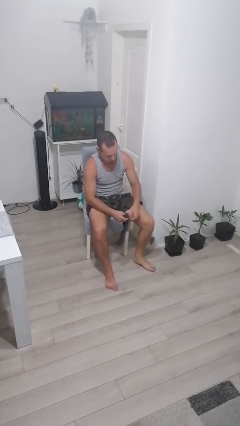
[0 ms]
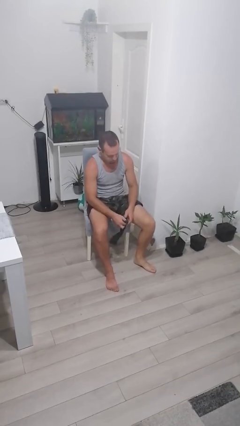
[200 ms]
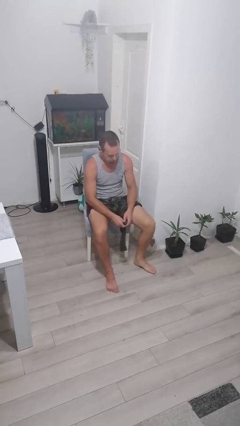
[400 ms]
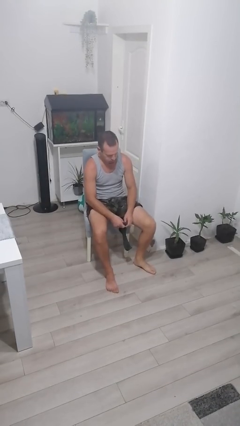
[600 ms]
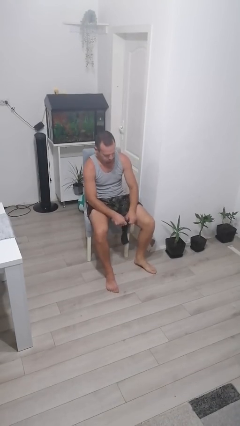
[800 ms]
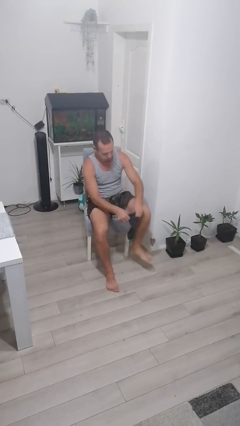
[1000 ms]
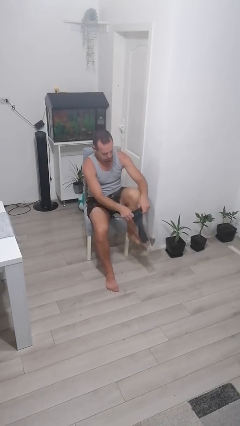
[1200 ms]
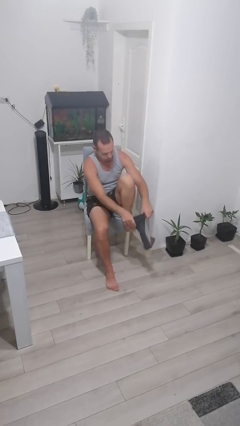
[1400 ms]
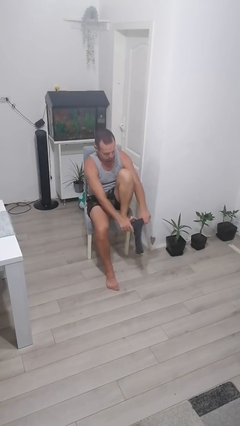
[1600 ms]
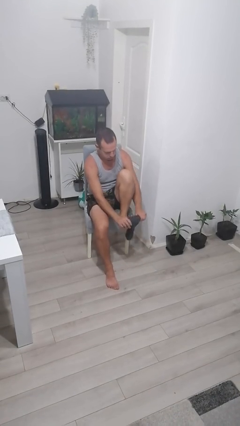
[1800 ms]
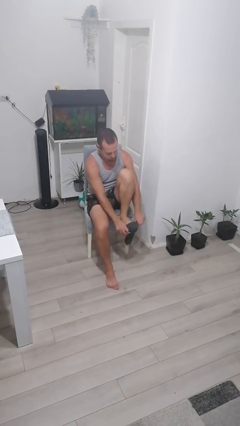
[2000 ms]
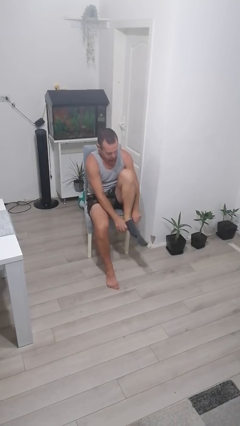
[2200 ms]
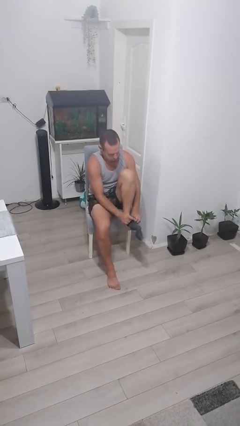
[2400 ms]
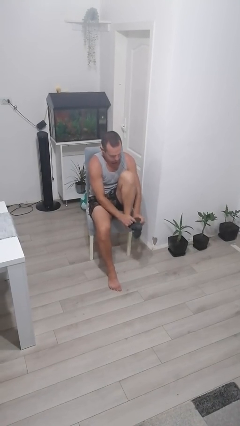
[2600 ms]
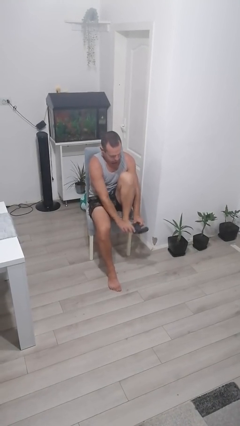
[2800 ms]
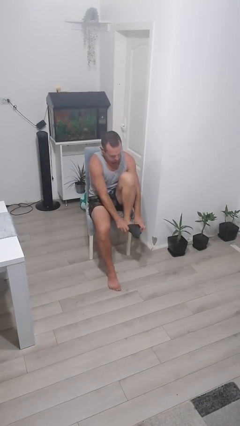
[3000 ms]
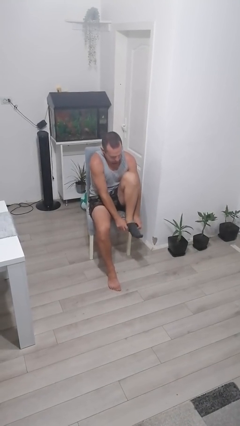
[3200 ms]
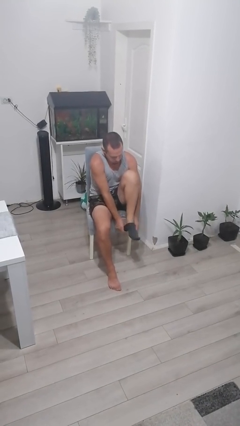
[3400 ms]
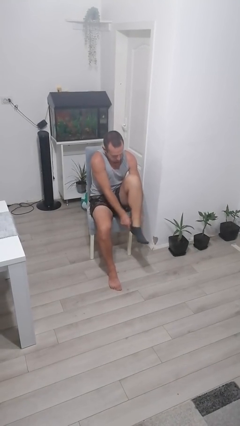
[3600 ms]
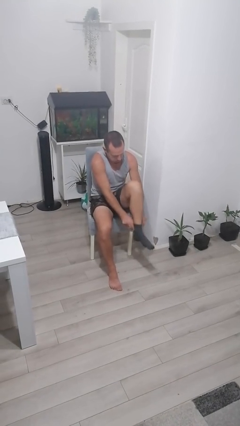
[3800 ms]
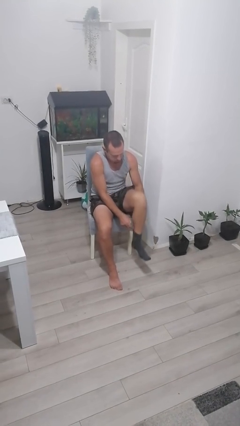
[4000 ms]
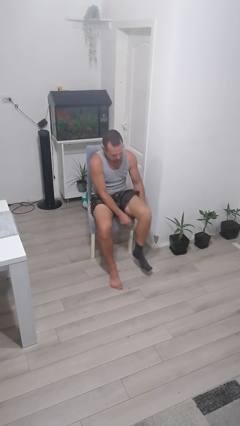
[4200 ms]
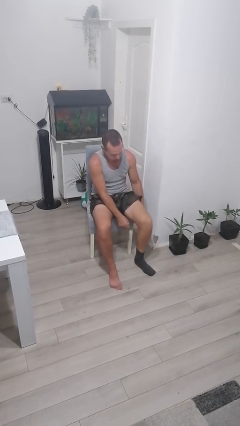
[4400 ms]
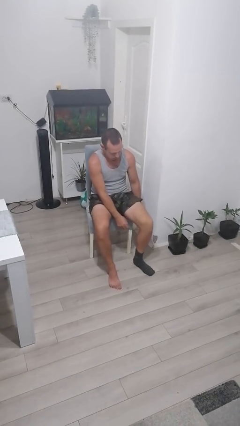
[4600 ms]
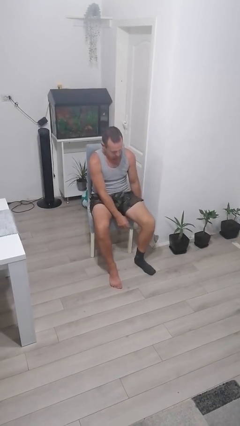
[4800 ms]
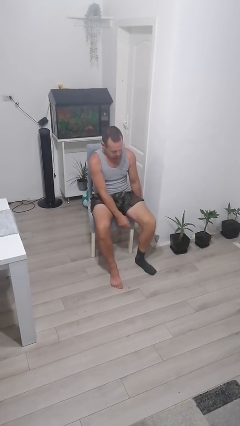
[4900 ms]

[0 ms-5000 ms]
person puts on socks

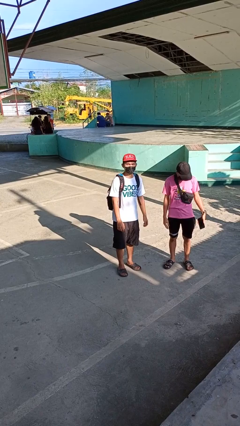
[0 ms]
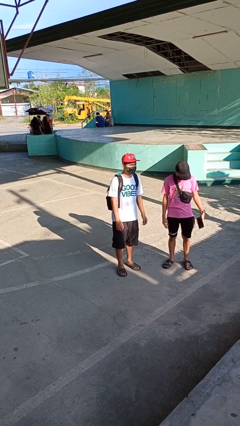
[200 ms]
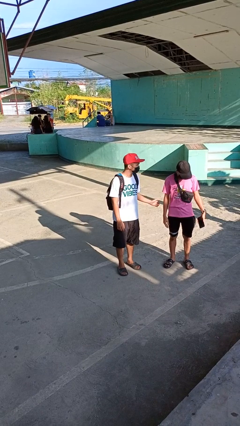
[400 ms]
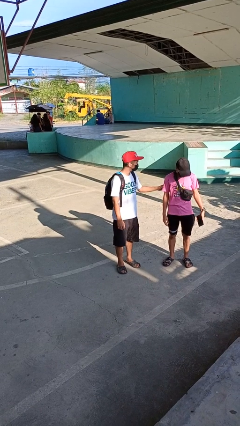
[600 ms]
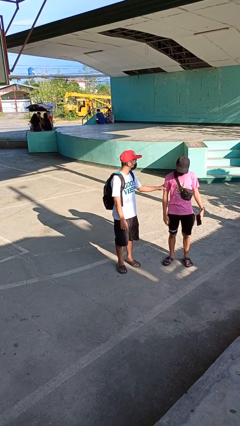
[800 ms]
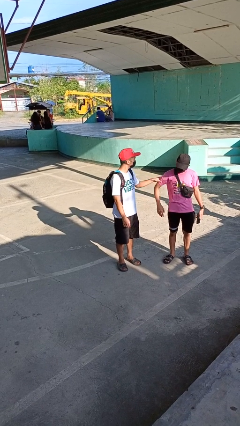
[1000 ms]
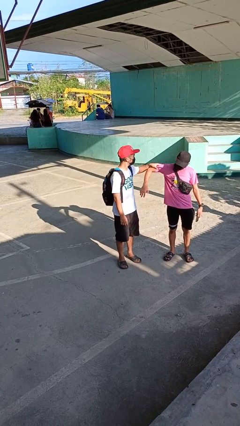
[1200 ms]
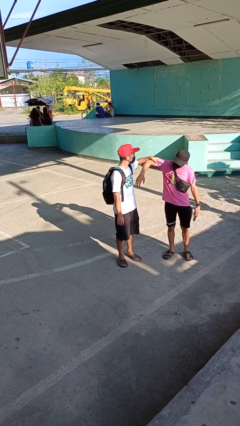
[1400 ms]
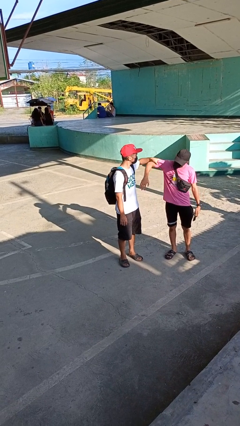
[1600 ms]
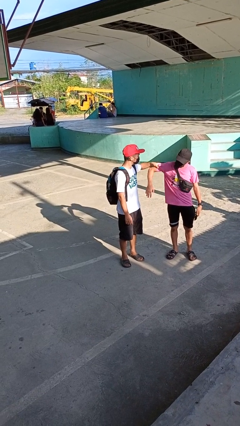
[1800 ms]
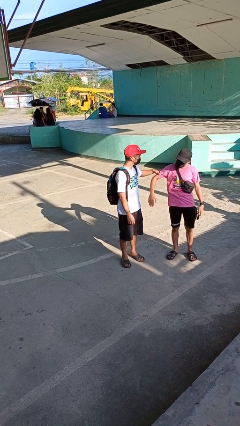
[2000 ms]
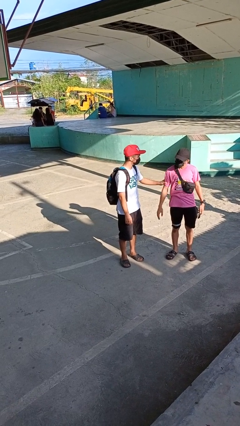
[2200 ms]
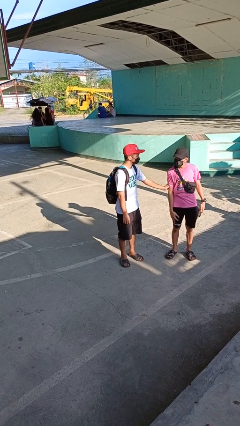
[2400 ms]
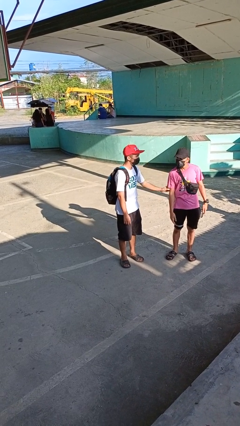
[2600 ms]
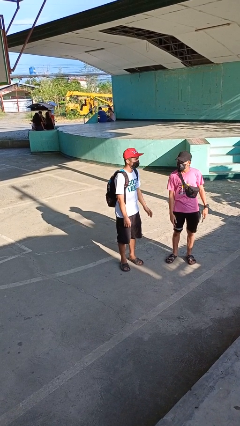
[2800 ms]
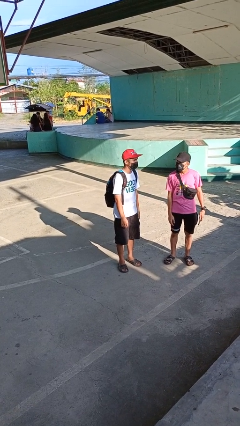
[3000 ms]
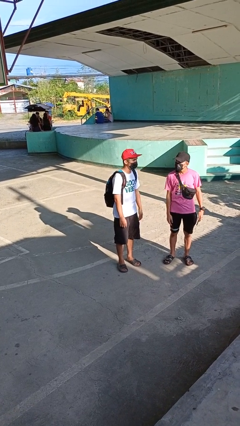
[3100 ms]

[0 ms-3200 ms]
person grabs person by bicep

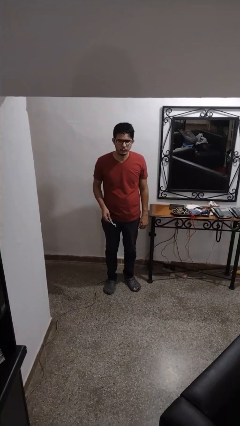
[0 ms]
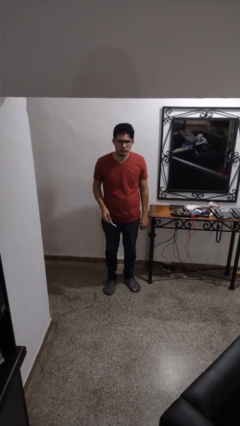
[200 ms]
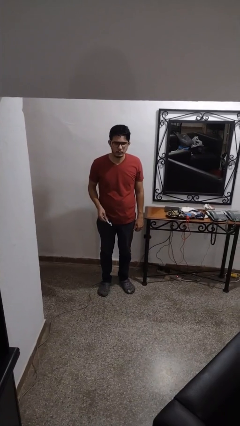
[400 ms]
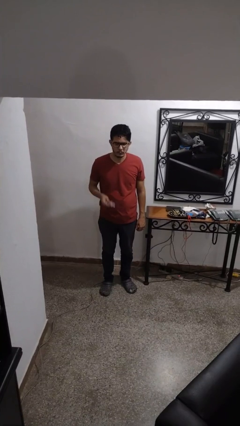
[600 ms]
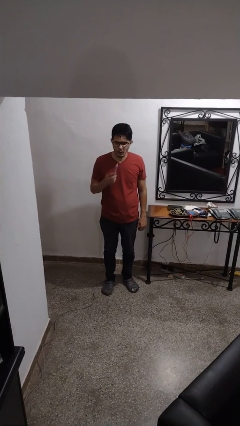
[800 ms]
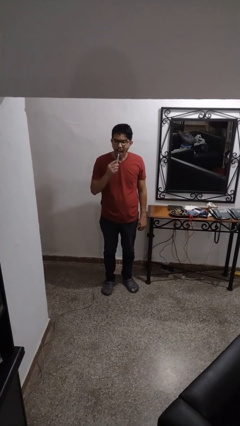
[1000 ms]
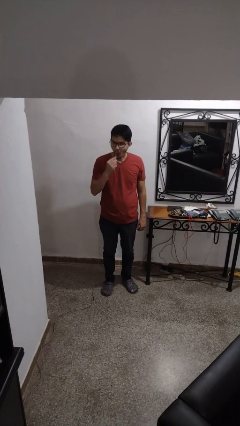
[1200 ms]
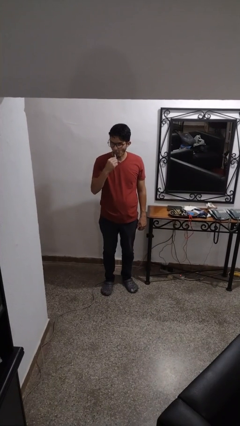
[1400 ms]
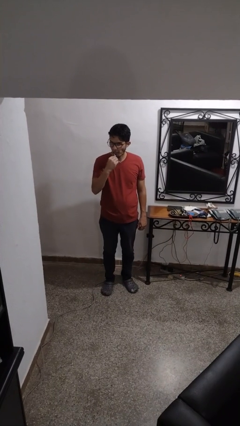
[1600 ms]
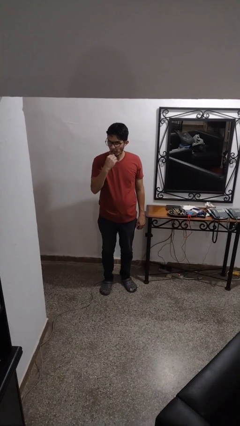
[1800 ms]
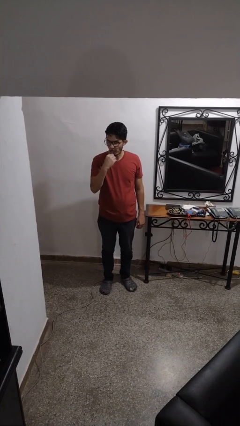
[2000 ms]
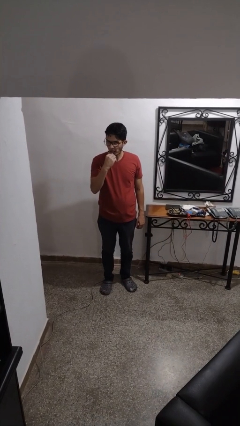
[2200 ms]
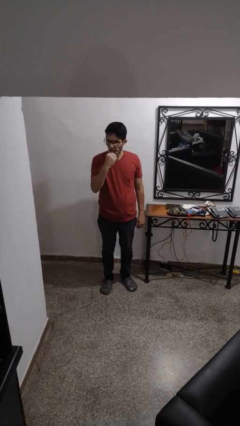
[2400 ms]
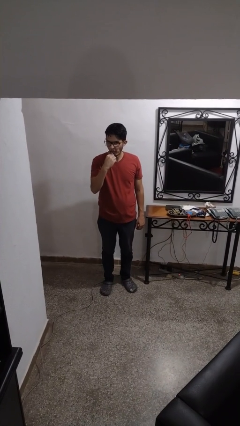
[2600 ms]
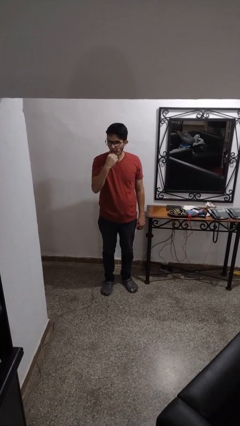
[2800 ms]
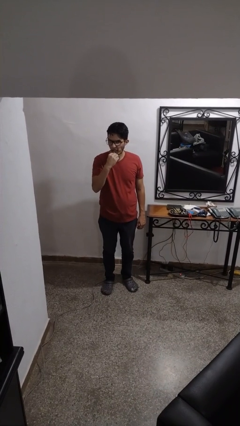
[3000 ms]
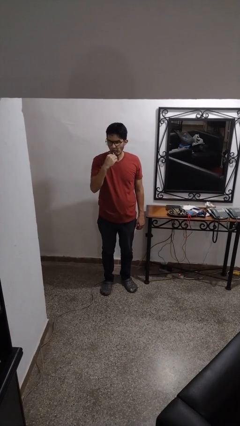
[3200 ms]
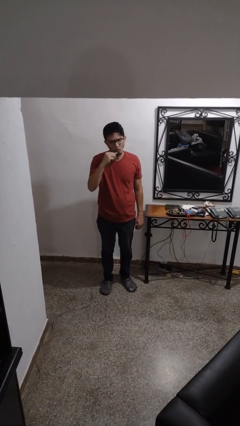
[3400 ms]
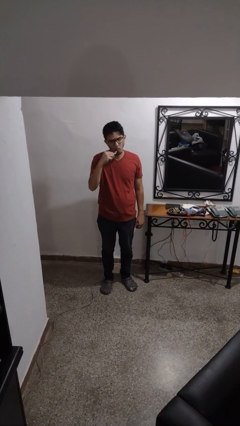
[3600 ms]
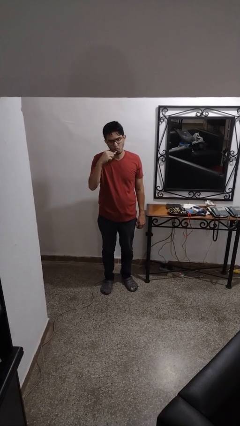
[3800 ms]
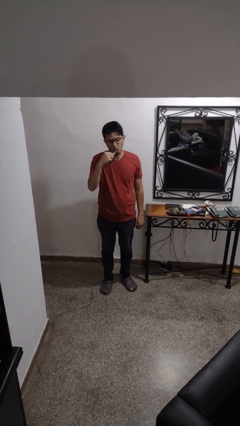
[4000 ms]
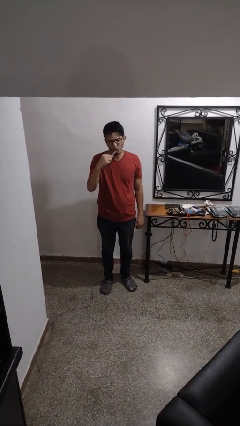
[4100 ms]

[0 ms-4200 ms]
person brushes teeth

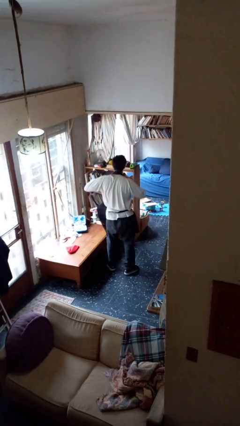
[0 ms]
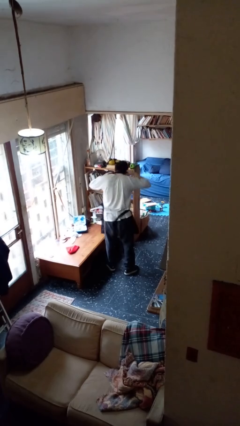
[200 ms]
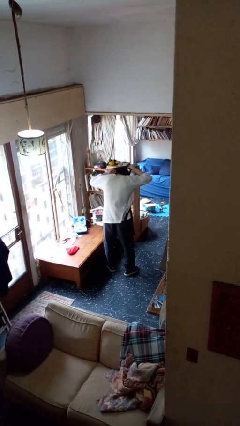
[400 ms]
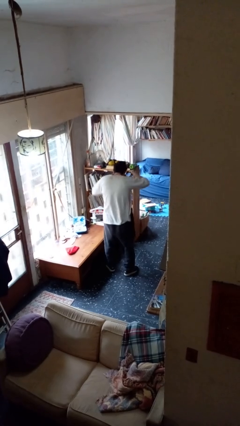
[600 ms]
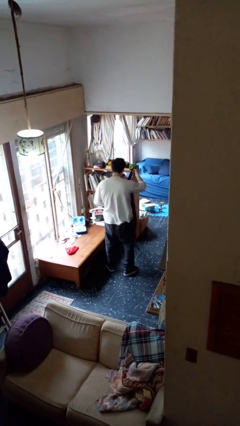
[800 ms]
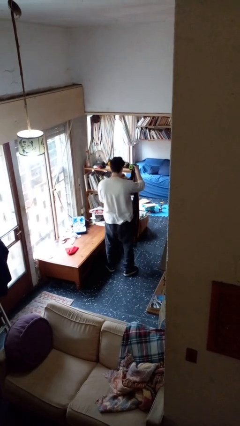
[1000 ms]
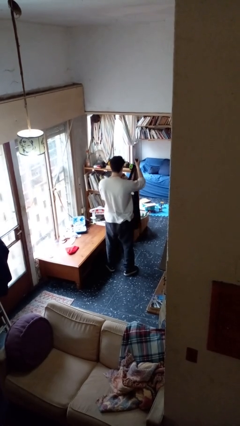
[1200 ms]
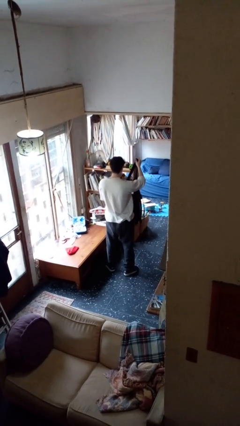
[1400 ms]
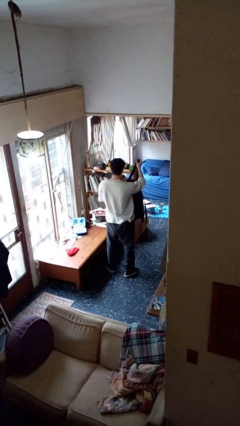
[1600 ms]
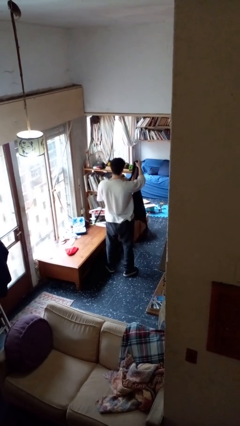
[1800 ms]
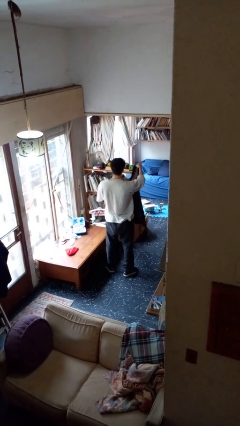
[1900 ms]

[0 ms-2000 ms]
person takes off apron

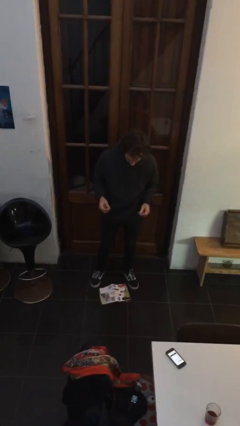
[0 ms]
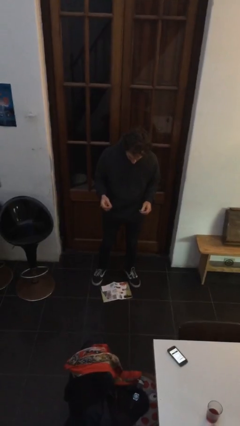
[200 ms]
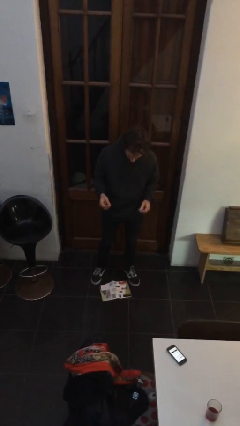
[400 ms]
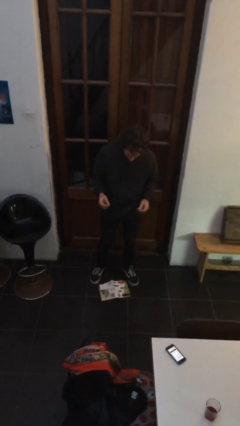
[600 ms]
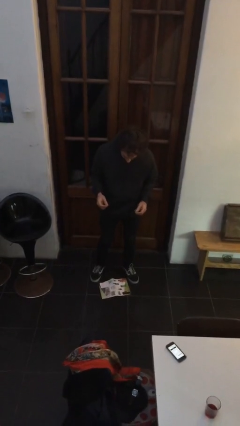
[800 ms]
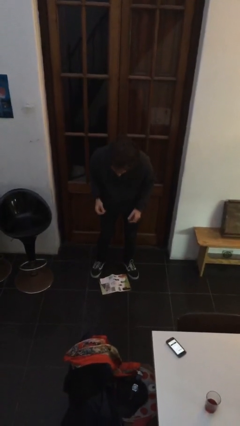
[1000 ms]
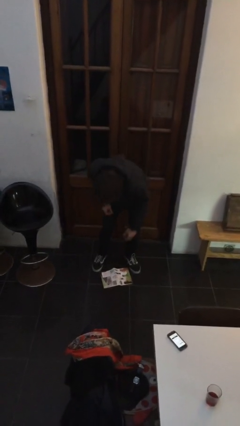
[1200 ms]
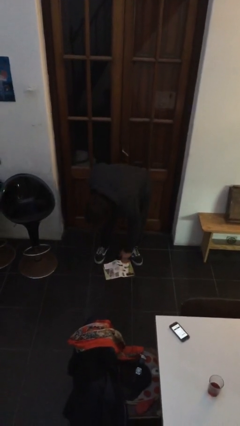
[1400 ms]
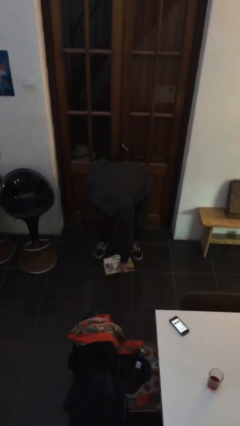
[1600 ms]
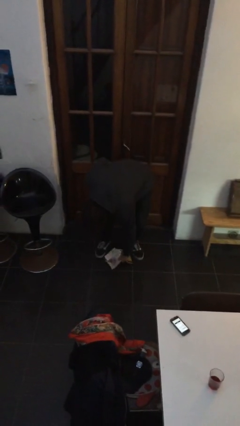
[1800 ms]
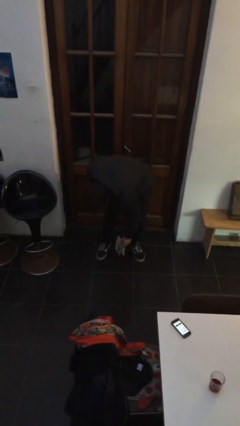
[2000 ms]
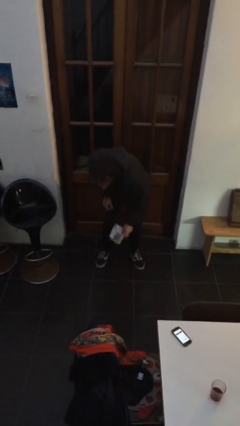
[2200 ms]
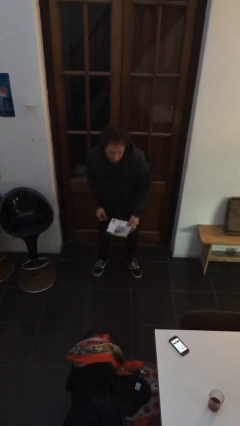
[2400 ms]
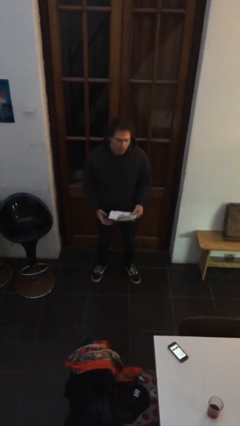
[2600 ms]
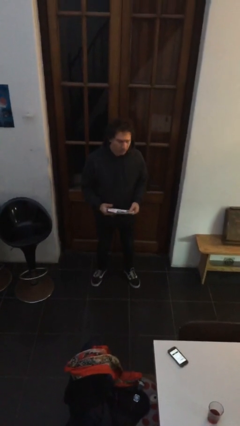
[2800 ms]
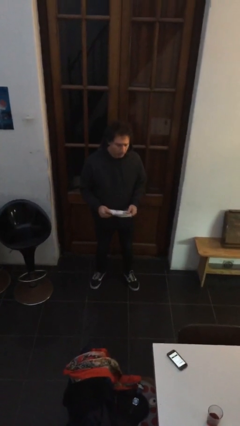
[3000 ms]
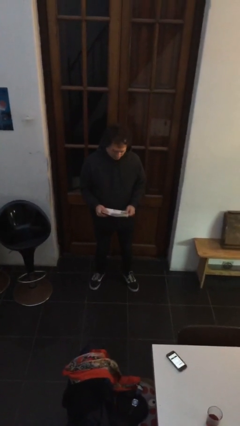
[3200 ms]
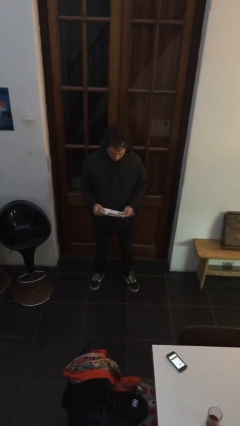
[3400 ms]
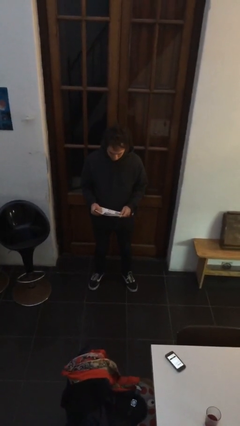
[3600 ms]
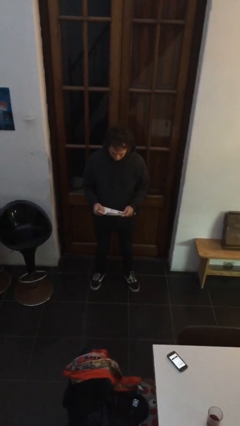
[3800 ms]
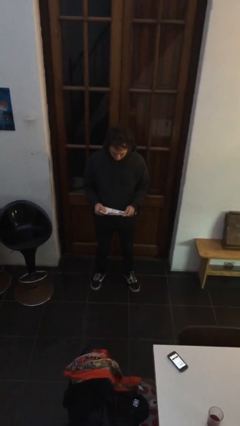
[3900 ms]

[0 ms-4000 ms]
person picks up object from floor
